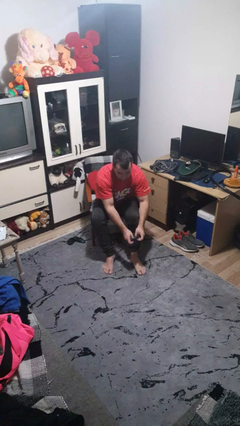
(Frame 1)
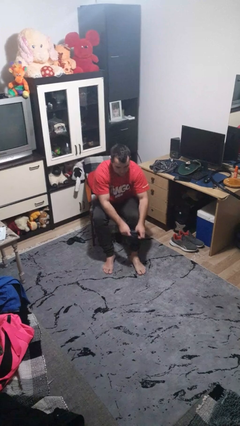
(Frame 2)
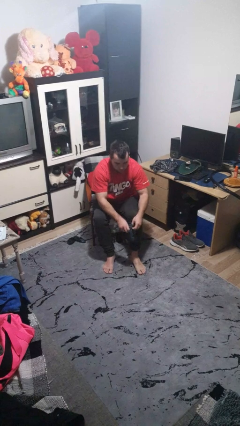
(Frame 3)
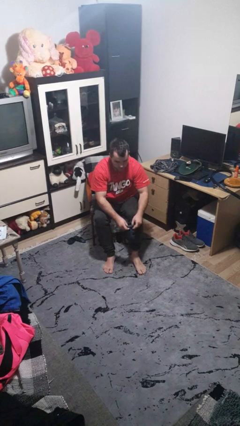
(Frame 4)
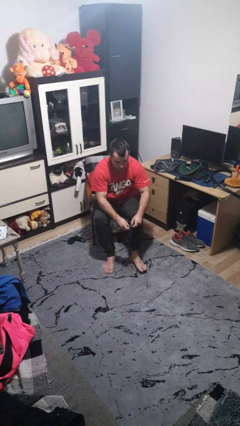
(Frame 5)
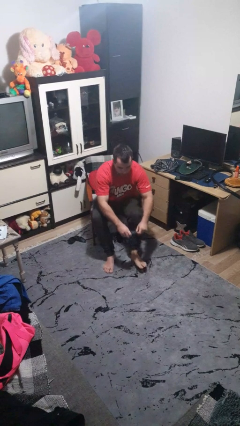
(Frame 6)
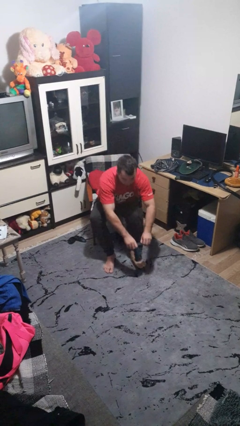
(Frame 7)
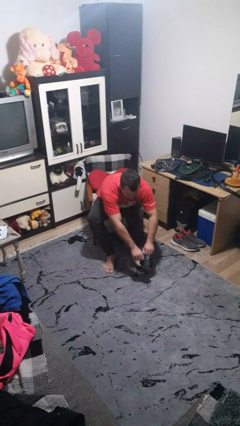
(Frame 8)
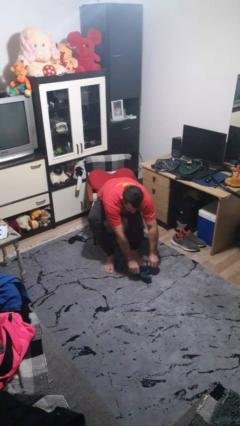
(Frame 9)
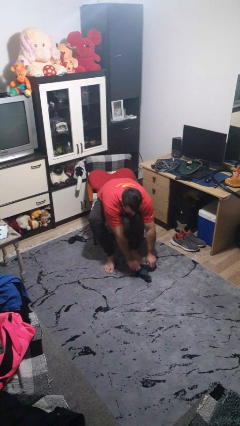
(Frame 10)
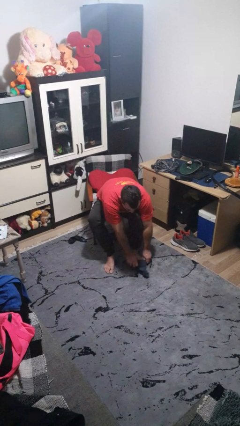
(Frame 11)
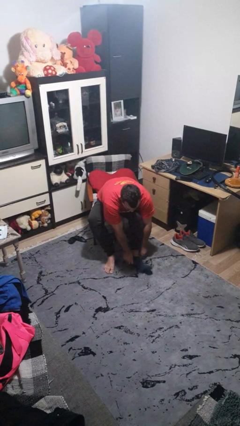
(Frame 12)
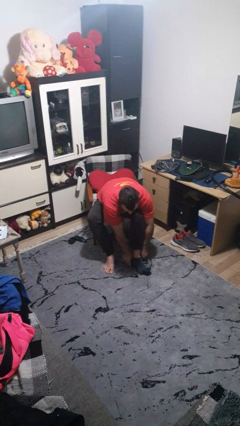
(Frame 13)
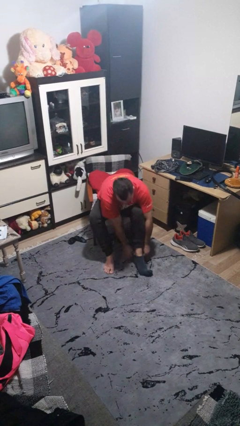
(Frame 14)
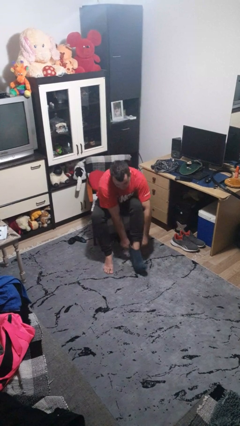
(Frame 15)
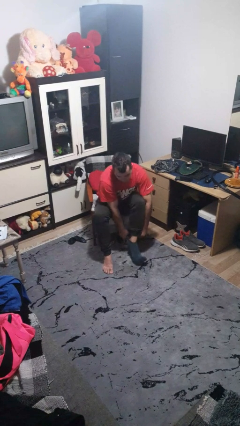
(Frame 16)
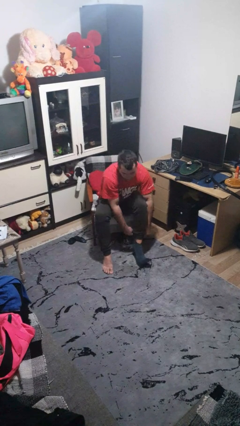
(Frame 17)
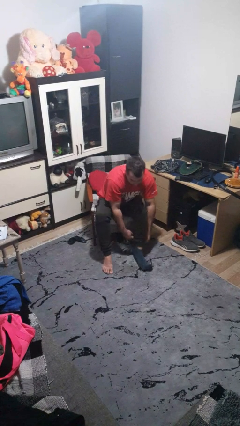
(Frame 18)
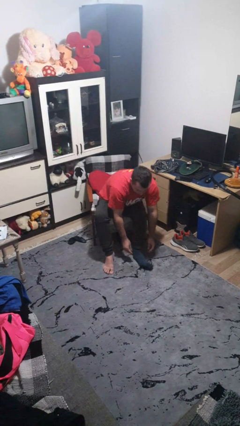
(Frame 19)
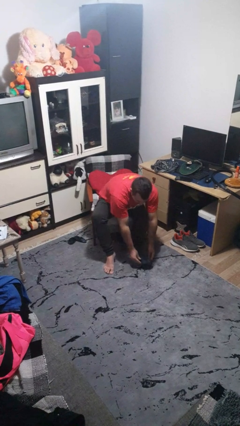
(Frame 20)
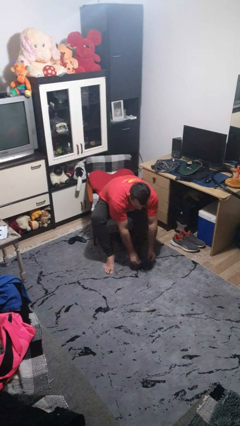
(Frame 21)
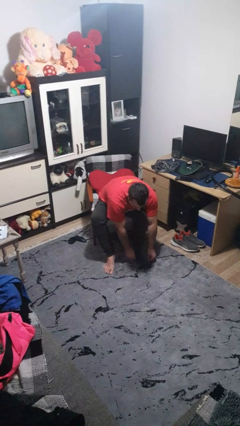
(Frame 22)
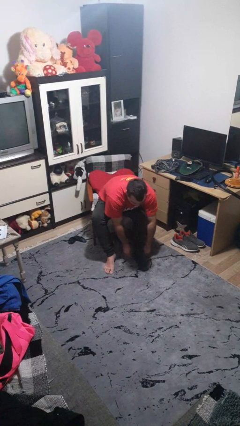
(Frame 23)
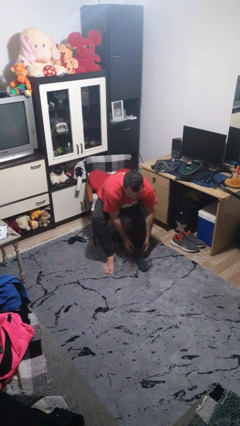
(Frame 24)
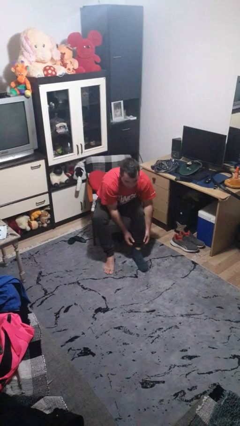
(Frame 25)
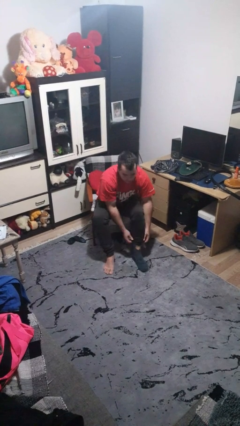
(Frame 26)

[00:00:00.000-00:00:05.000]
person puts on socks

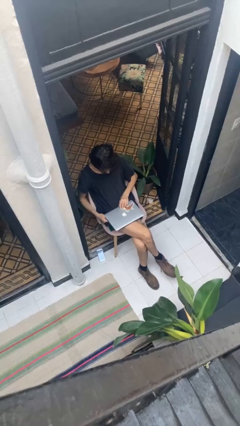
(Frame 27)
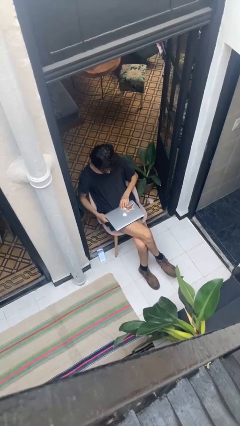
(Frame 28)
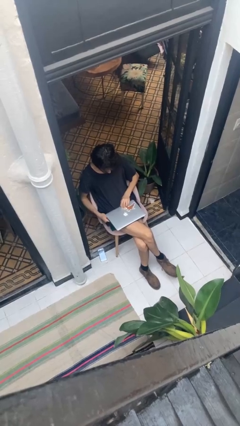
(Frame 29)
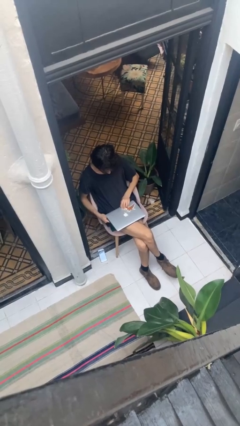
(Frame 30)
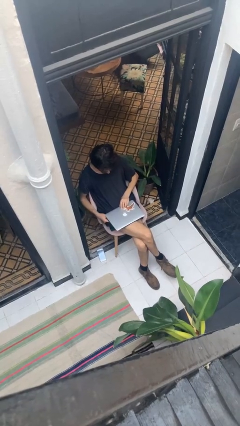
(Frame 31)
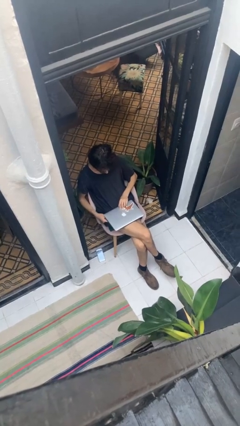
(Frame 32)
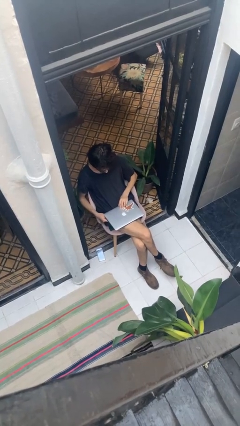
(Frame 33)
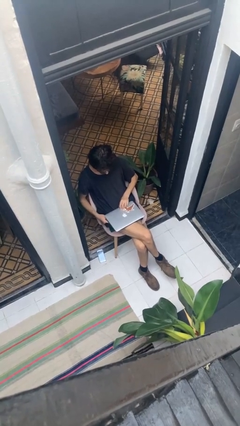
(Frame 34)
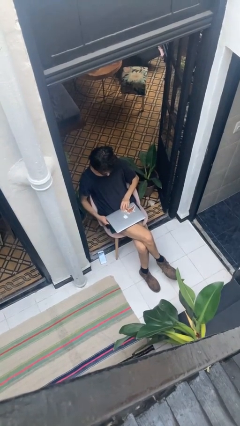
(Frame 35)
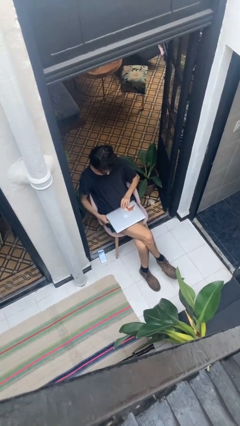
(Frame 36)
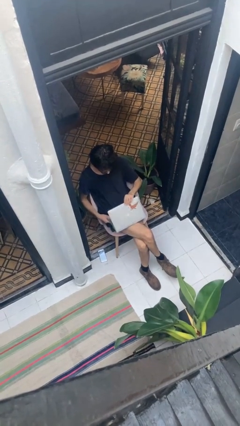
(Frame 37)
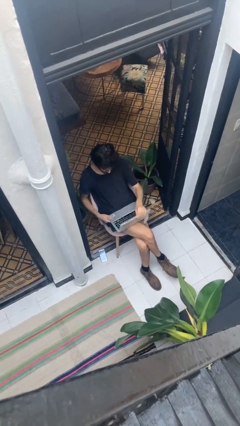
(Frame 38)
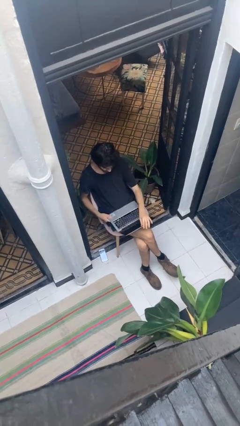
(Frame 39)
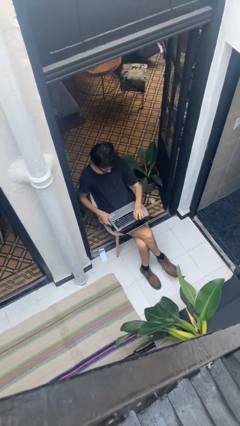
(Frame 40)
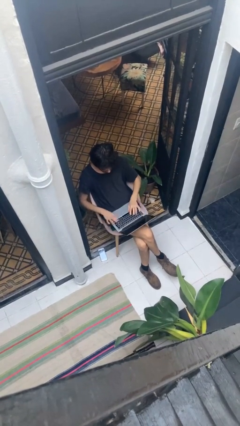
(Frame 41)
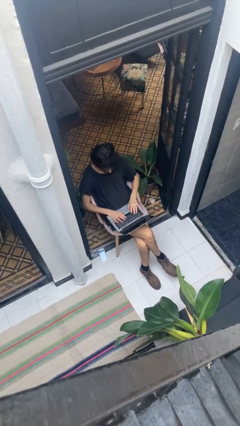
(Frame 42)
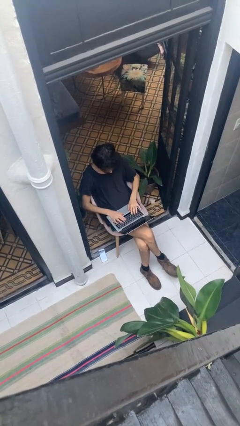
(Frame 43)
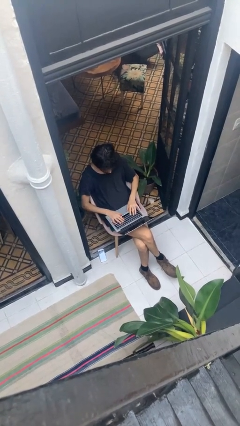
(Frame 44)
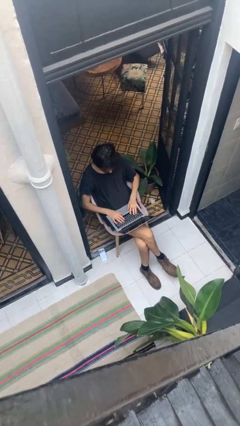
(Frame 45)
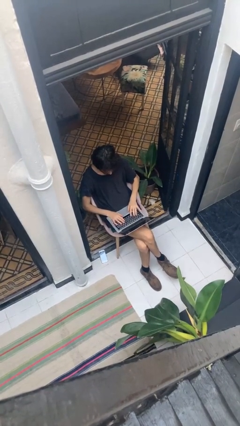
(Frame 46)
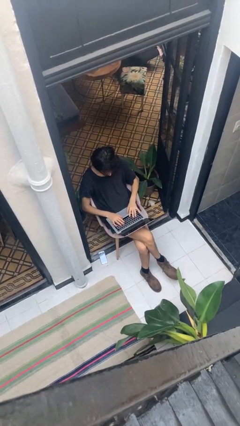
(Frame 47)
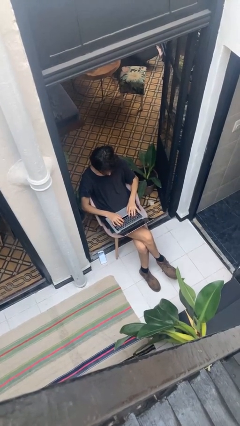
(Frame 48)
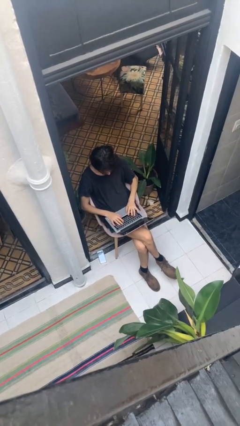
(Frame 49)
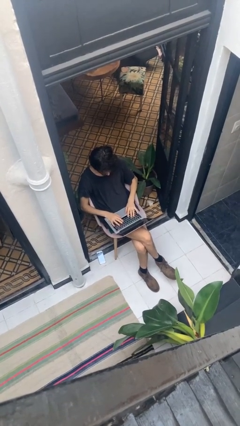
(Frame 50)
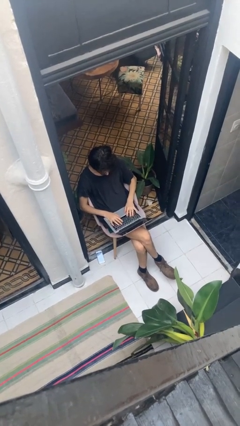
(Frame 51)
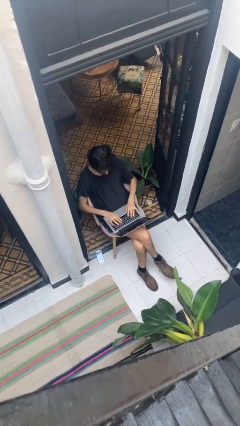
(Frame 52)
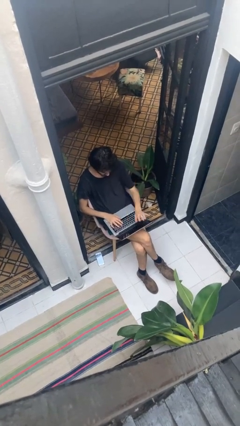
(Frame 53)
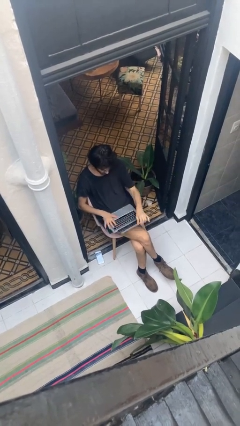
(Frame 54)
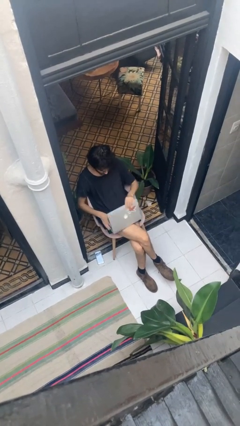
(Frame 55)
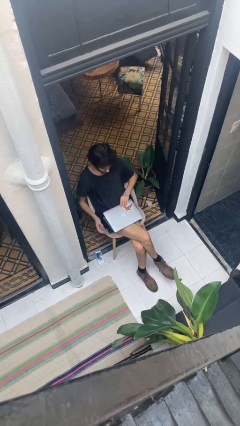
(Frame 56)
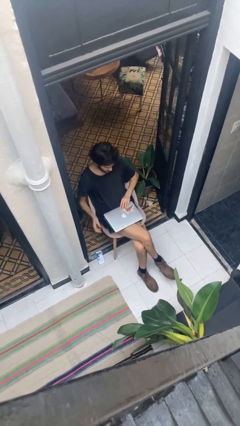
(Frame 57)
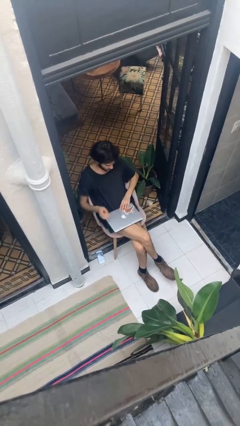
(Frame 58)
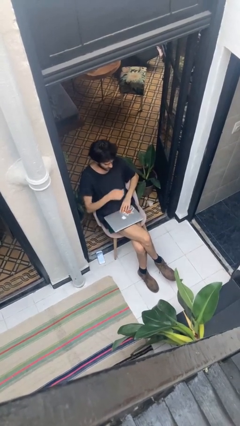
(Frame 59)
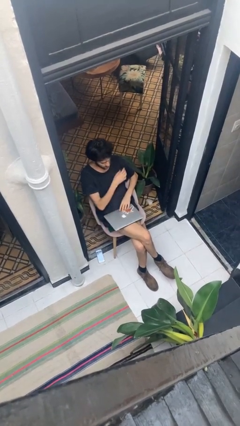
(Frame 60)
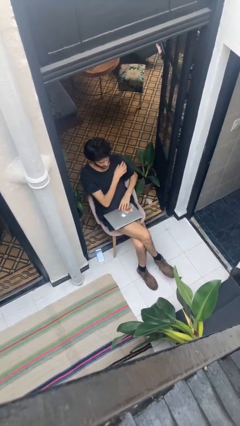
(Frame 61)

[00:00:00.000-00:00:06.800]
person interacts with laptop

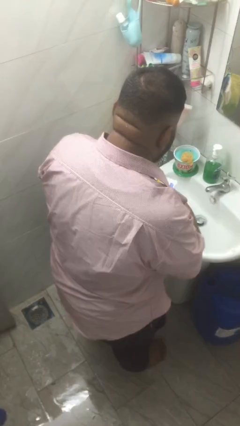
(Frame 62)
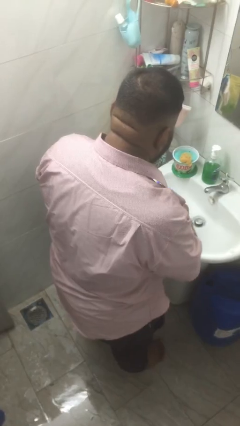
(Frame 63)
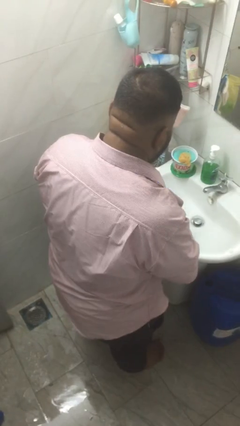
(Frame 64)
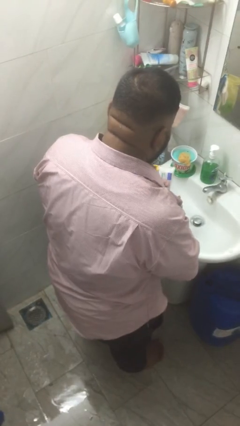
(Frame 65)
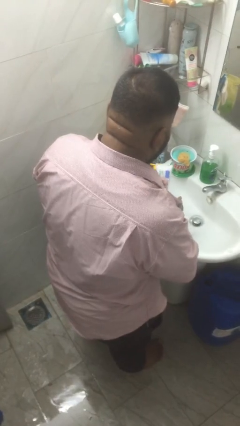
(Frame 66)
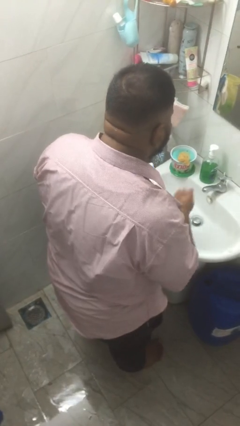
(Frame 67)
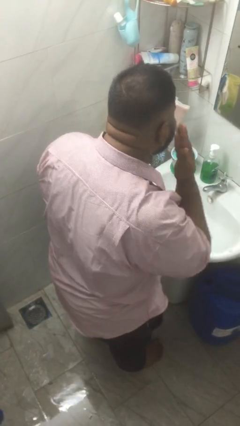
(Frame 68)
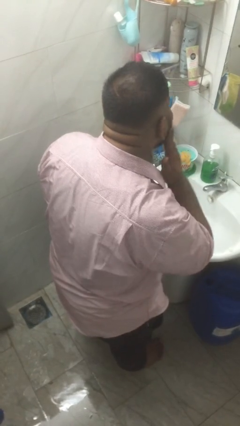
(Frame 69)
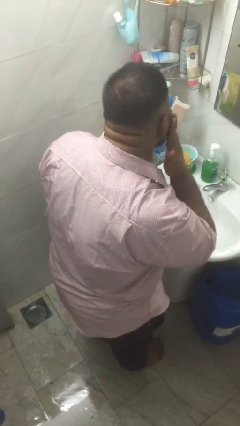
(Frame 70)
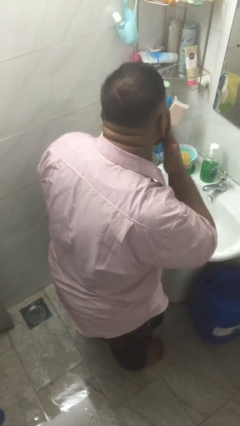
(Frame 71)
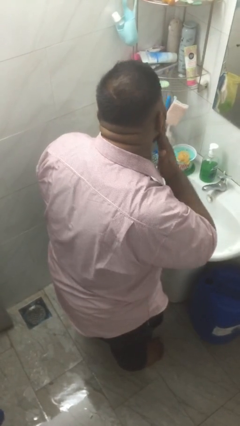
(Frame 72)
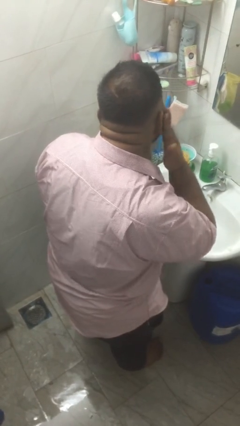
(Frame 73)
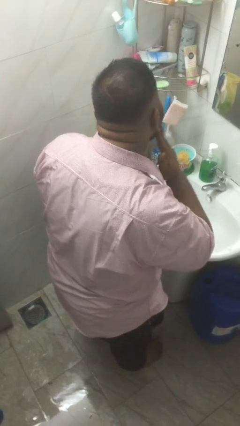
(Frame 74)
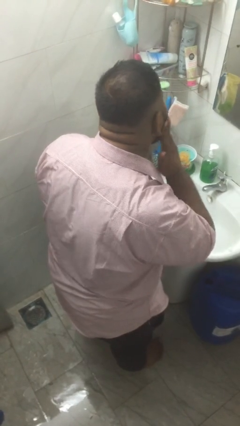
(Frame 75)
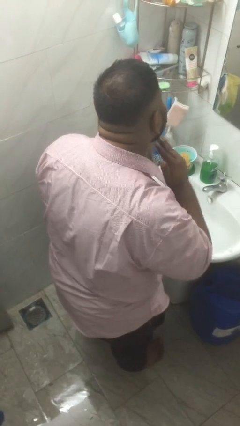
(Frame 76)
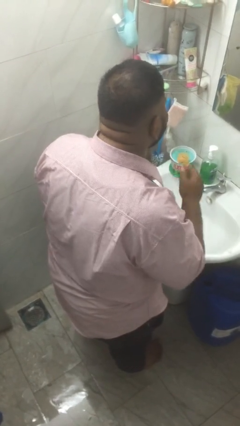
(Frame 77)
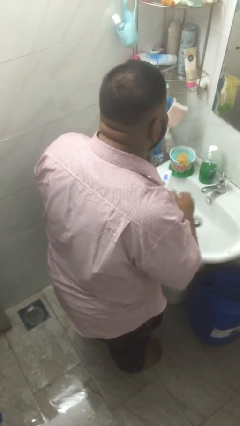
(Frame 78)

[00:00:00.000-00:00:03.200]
person applies shaving cream

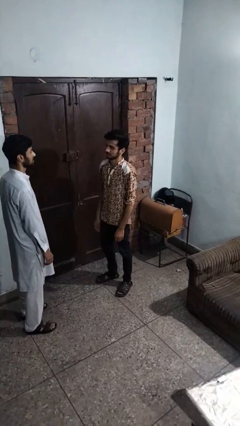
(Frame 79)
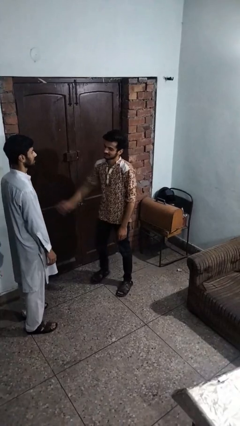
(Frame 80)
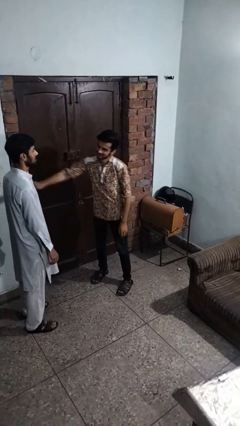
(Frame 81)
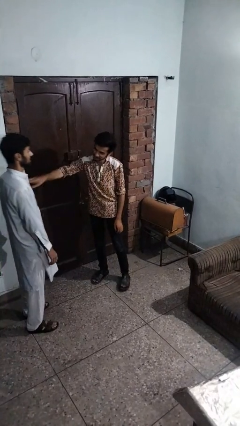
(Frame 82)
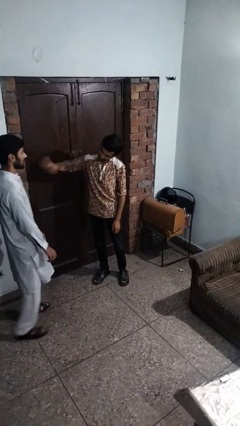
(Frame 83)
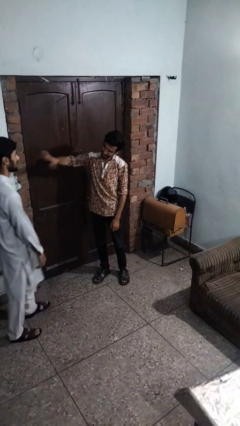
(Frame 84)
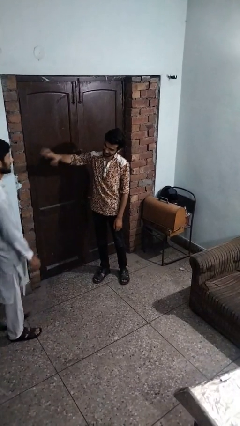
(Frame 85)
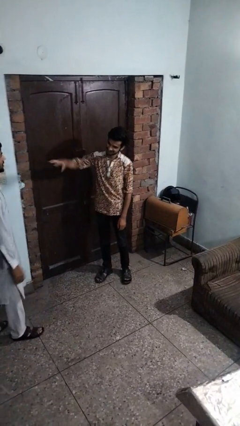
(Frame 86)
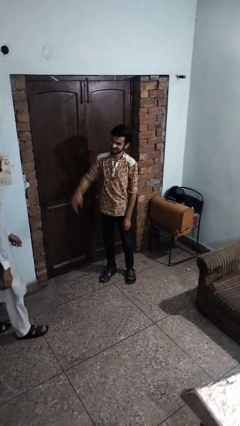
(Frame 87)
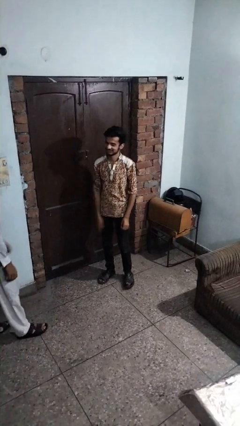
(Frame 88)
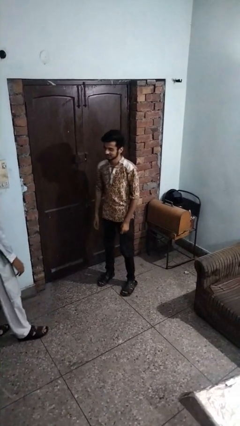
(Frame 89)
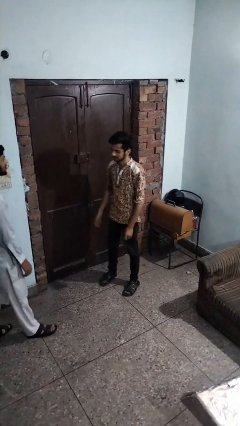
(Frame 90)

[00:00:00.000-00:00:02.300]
person shoves person

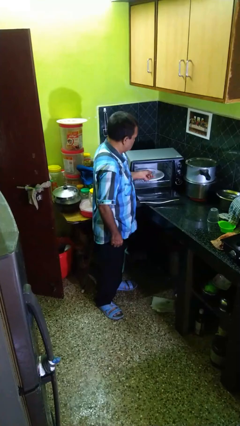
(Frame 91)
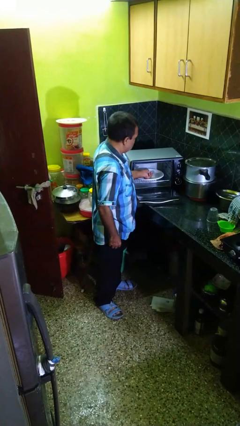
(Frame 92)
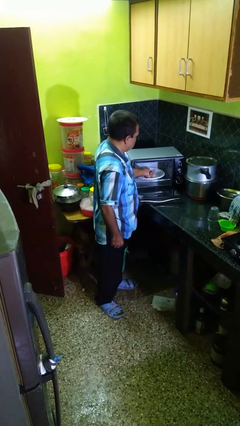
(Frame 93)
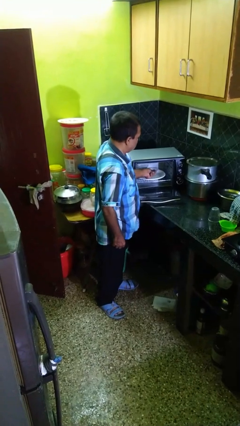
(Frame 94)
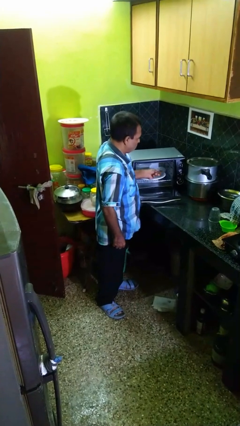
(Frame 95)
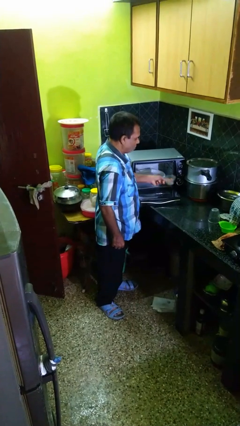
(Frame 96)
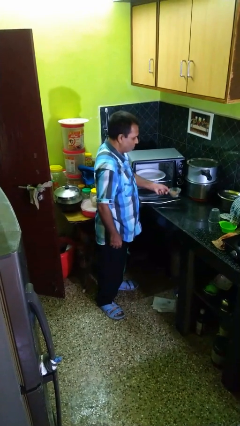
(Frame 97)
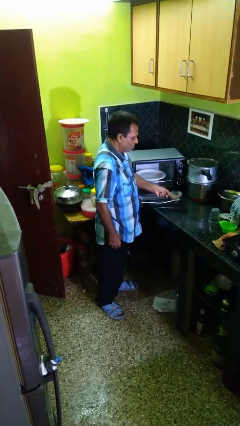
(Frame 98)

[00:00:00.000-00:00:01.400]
person takes object from microwave
